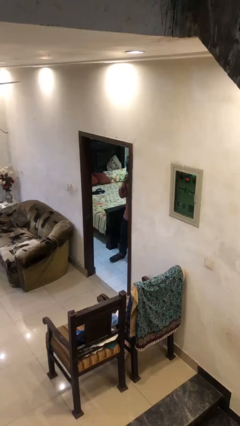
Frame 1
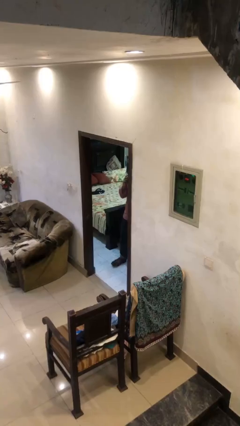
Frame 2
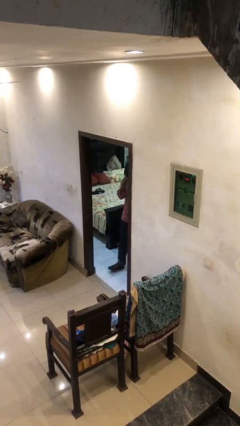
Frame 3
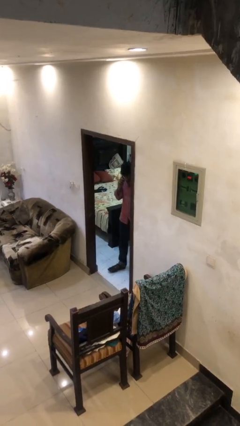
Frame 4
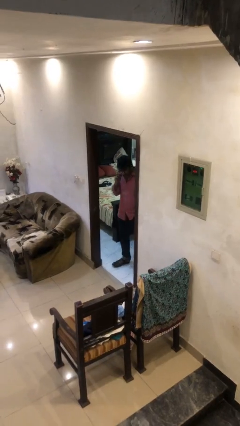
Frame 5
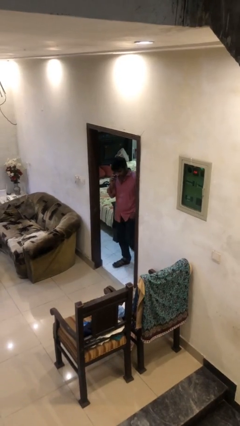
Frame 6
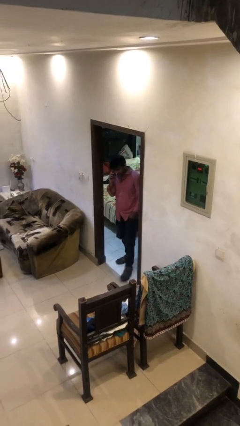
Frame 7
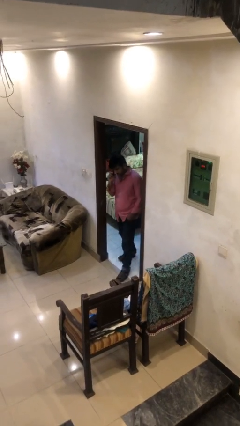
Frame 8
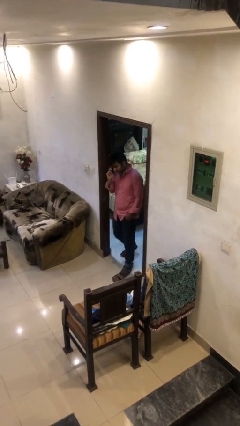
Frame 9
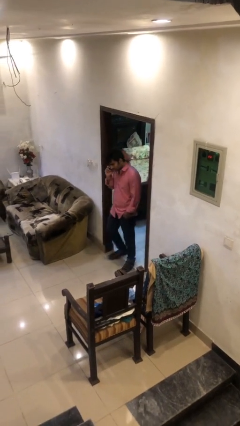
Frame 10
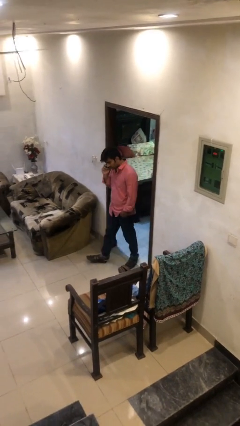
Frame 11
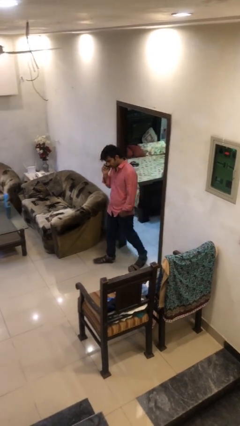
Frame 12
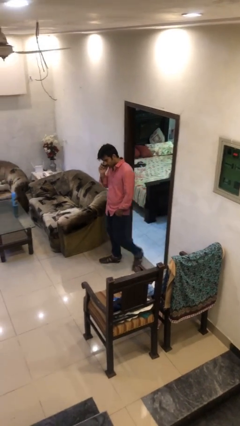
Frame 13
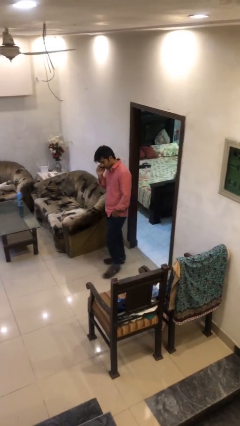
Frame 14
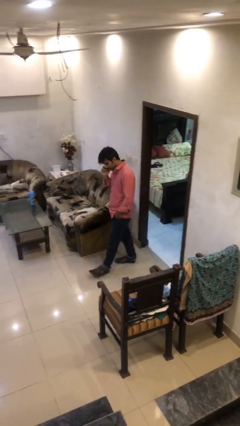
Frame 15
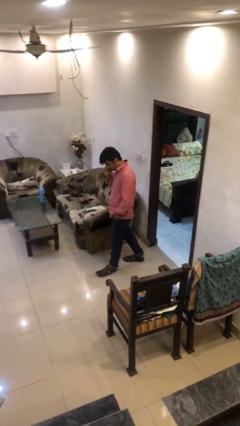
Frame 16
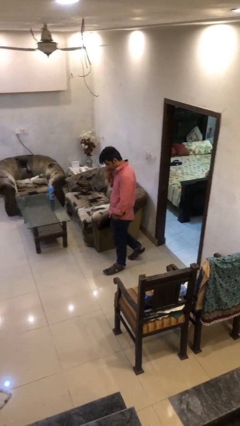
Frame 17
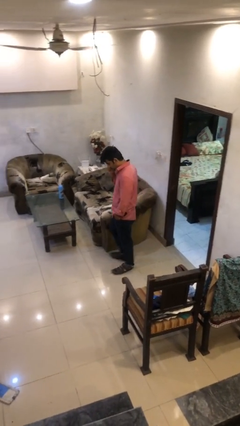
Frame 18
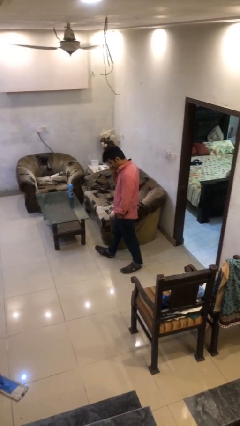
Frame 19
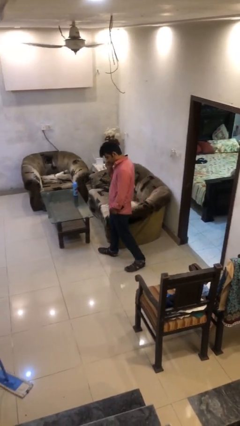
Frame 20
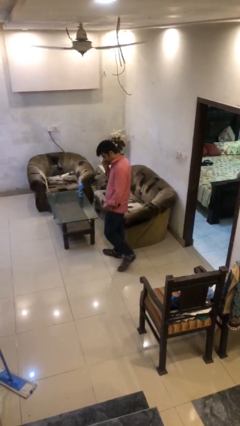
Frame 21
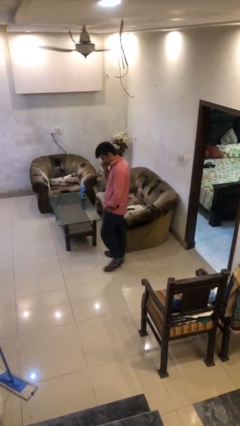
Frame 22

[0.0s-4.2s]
person enters scene through structure

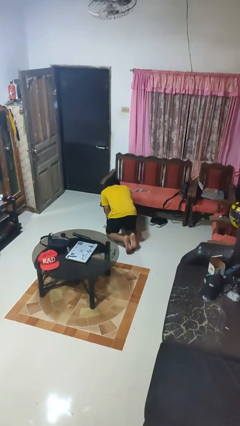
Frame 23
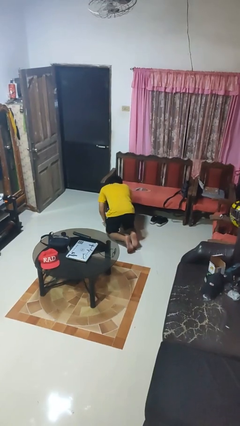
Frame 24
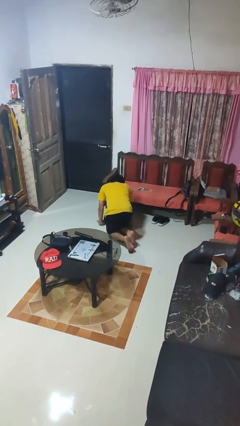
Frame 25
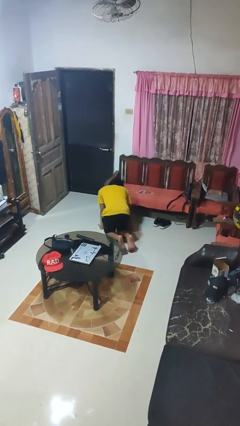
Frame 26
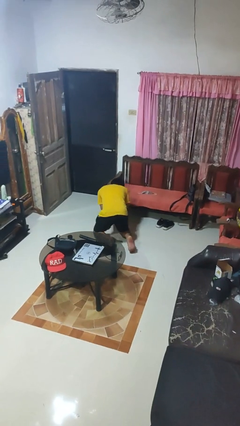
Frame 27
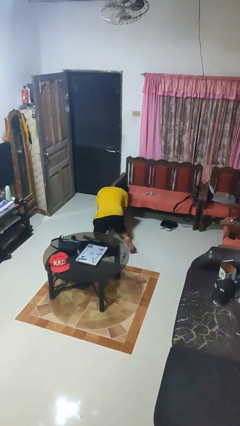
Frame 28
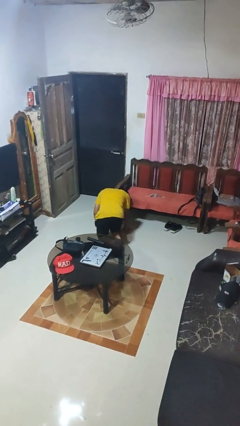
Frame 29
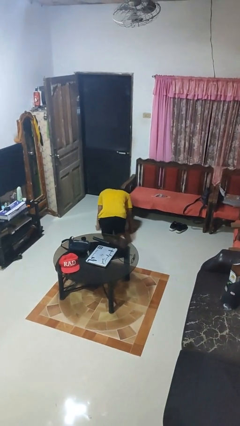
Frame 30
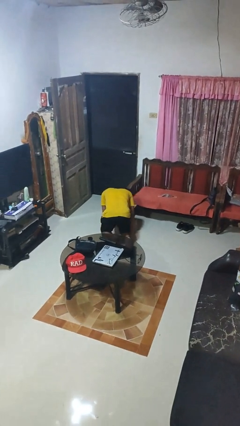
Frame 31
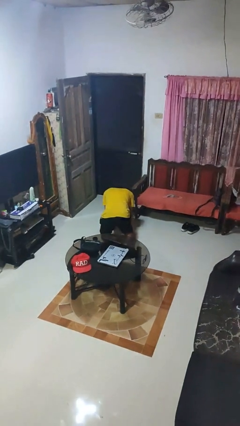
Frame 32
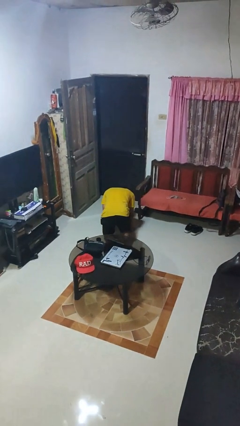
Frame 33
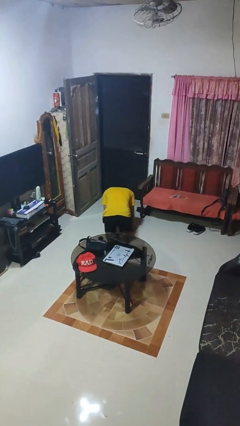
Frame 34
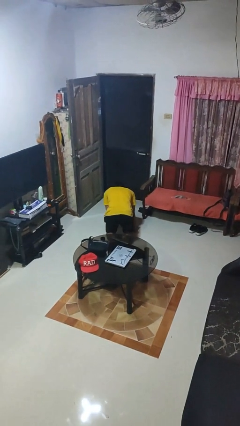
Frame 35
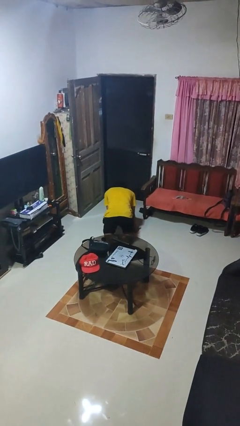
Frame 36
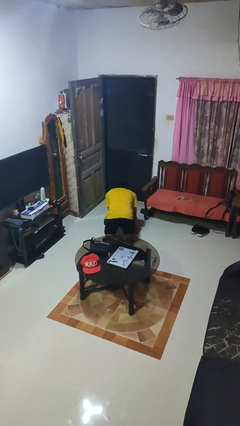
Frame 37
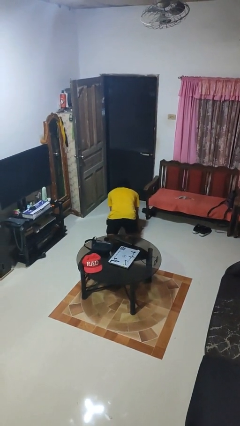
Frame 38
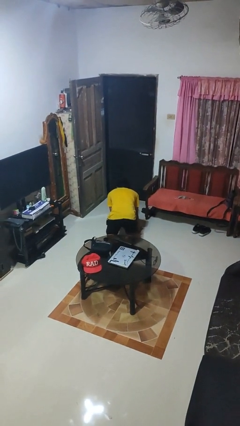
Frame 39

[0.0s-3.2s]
person crawls

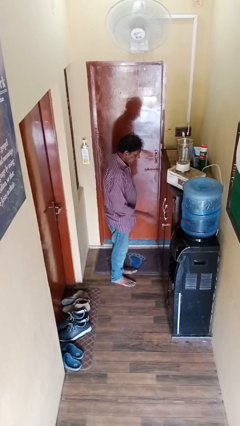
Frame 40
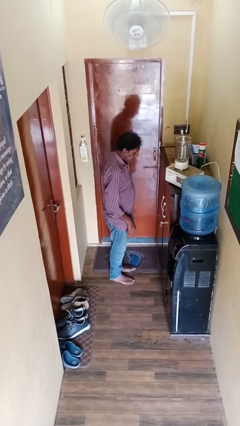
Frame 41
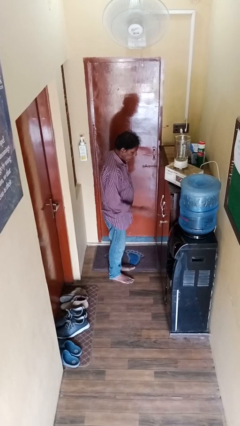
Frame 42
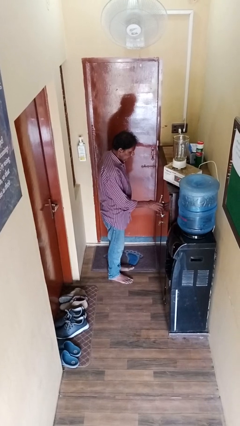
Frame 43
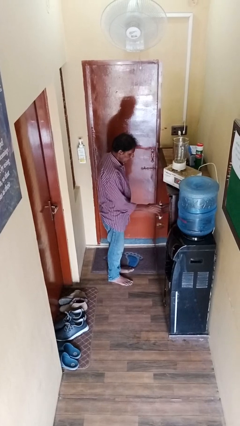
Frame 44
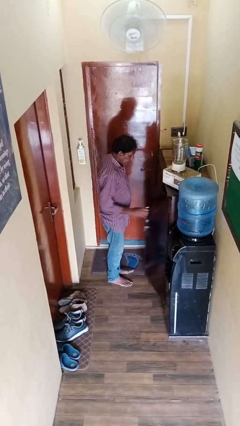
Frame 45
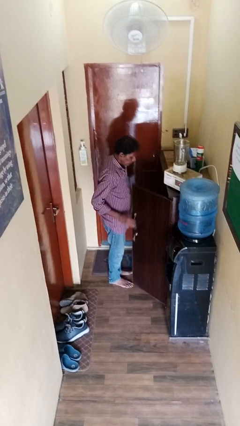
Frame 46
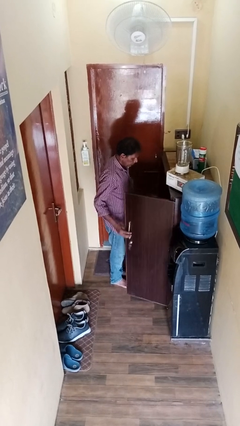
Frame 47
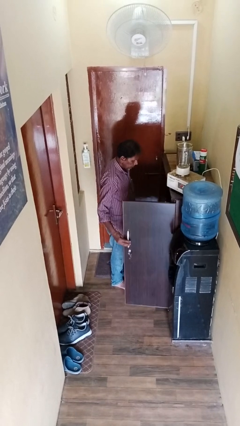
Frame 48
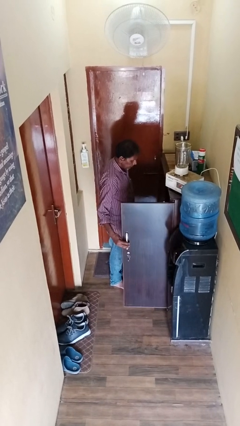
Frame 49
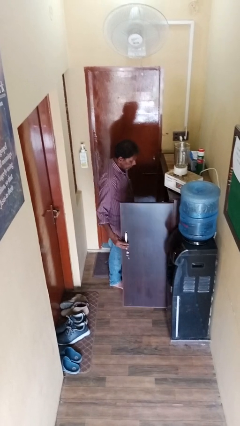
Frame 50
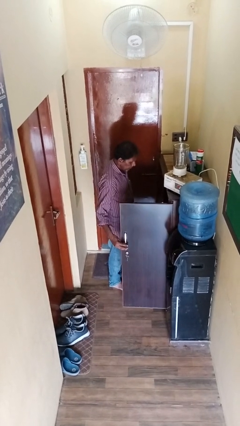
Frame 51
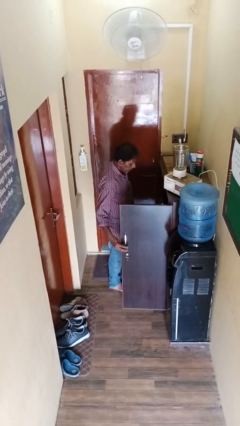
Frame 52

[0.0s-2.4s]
person opens cabinet

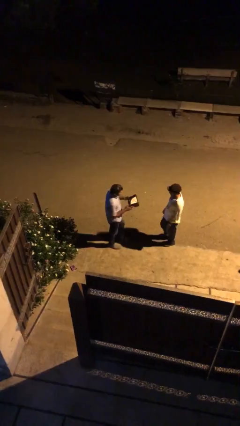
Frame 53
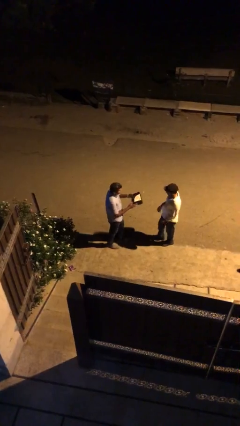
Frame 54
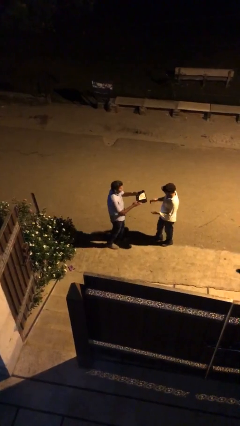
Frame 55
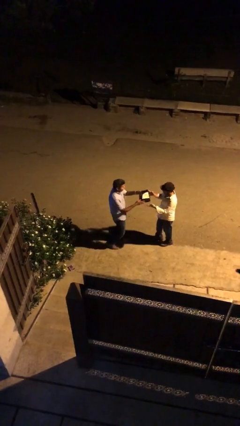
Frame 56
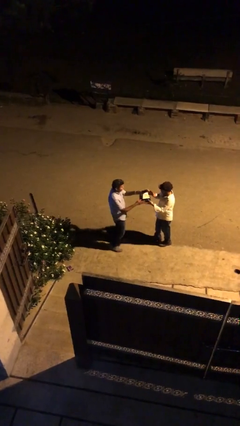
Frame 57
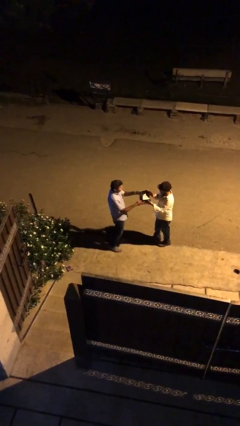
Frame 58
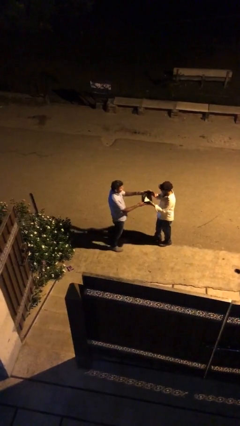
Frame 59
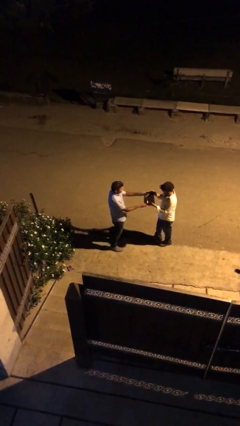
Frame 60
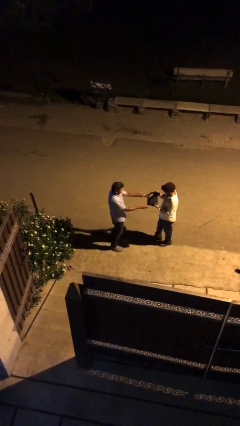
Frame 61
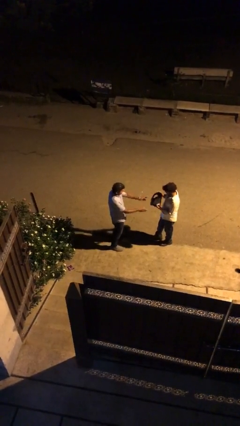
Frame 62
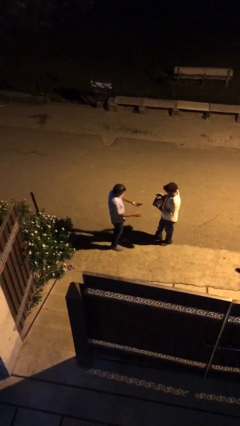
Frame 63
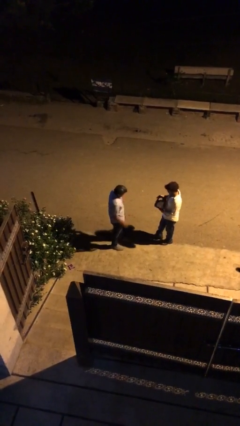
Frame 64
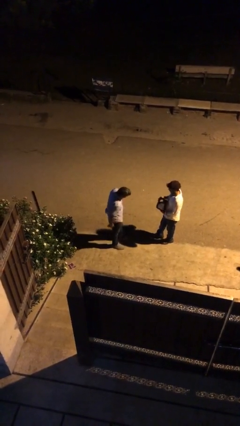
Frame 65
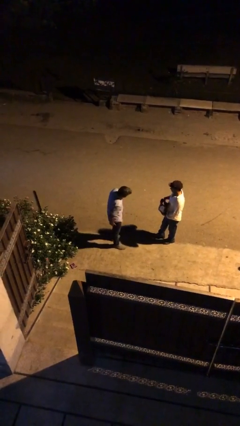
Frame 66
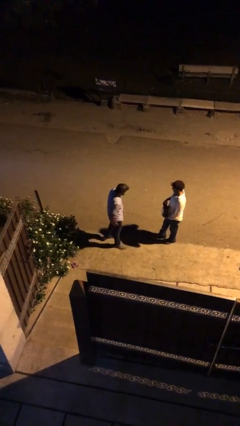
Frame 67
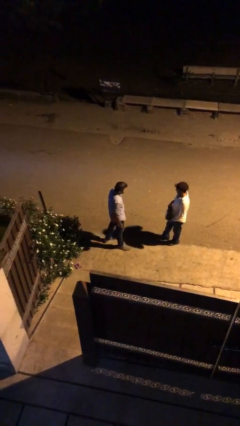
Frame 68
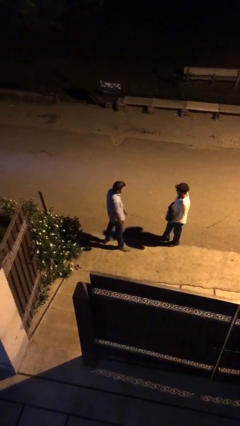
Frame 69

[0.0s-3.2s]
person transfers object to person

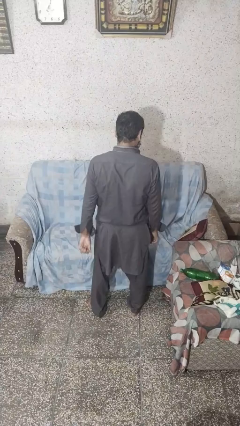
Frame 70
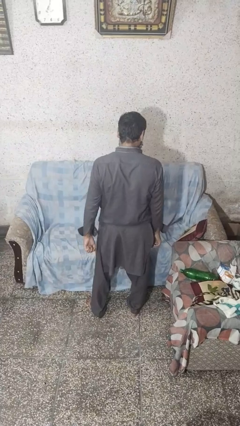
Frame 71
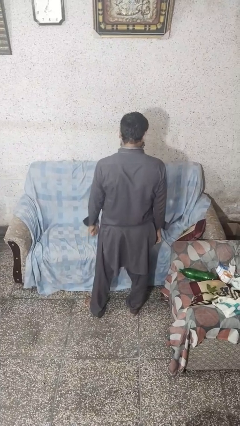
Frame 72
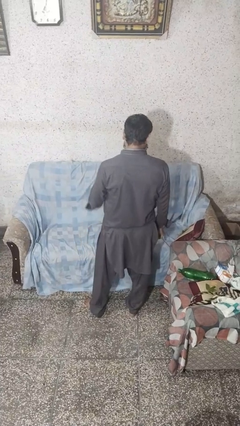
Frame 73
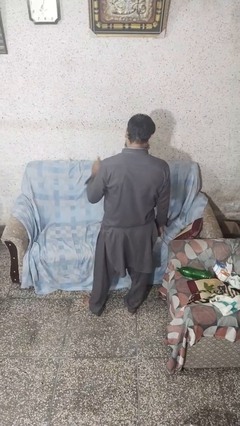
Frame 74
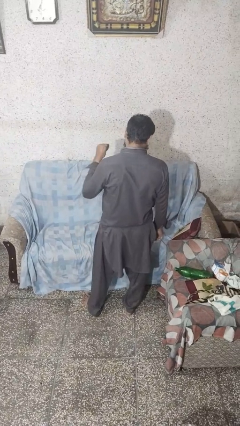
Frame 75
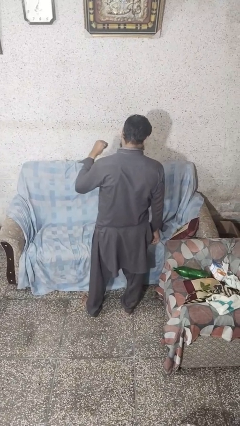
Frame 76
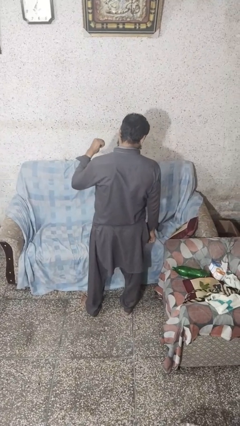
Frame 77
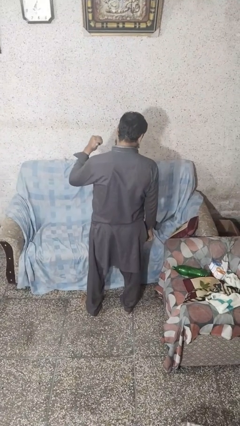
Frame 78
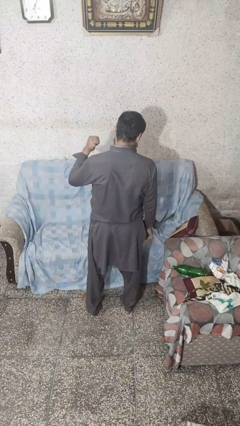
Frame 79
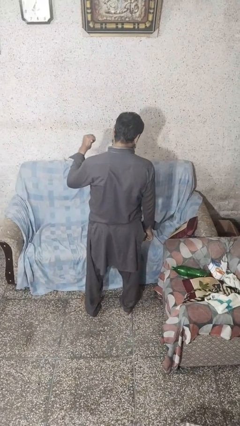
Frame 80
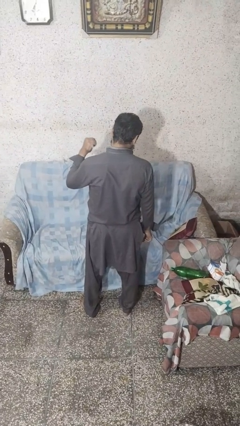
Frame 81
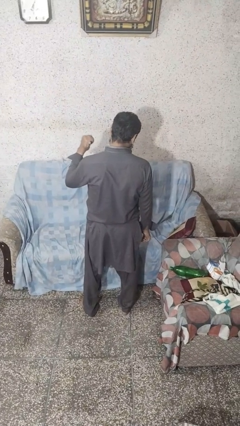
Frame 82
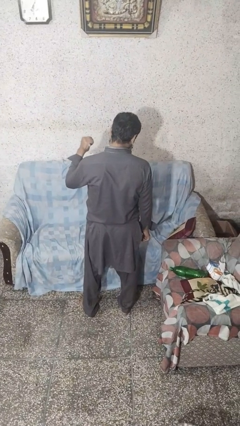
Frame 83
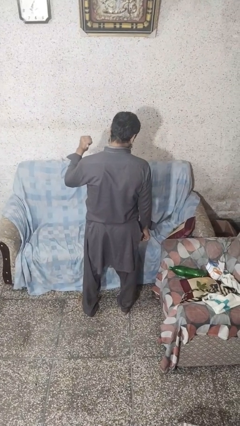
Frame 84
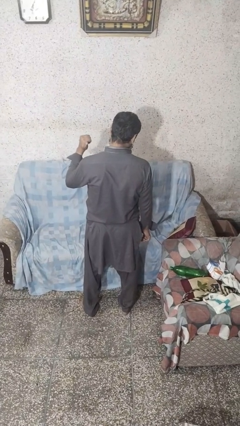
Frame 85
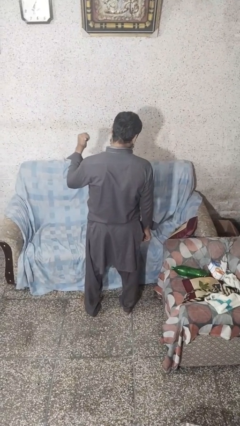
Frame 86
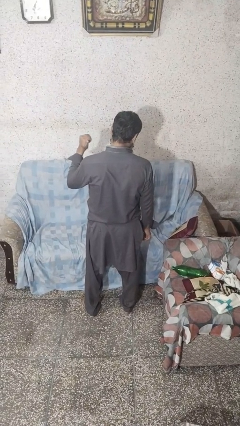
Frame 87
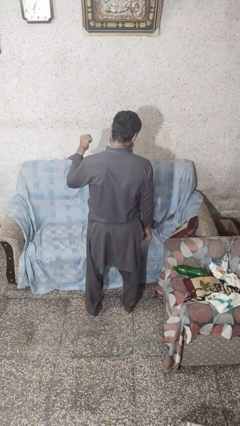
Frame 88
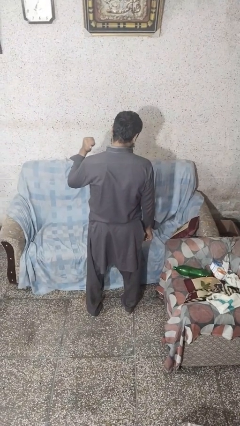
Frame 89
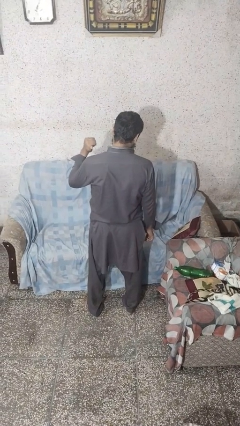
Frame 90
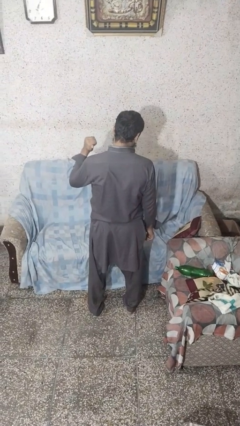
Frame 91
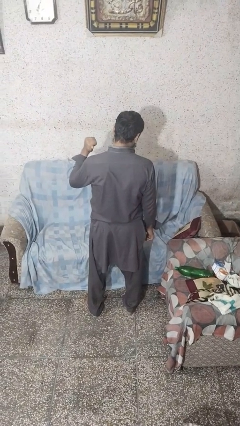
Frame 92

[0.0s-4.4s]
person gestures behind me
